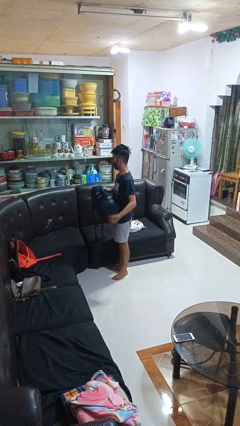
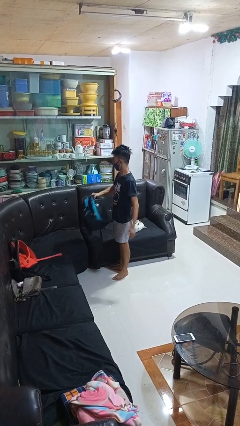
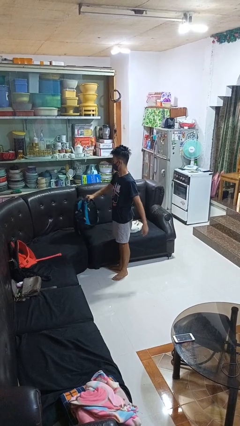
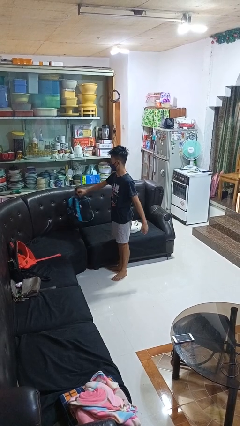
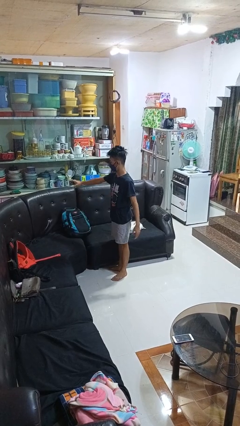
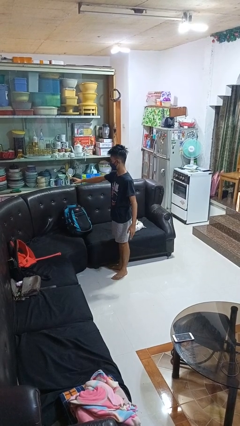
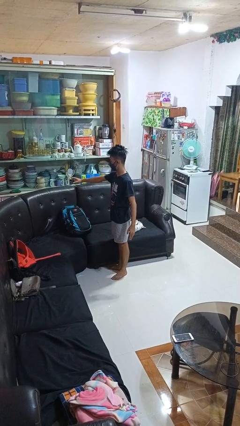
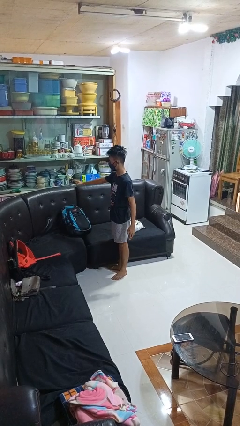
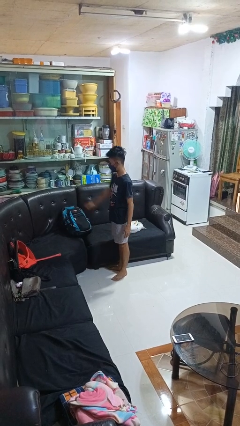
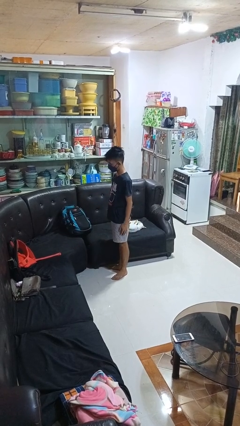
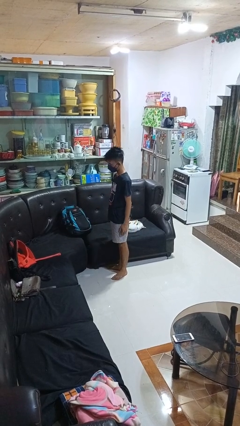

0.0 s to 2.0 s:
person puts down object on couch

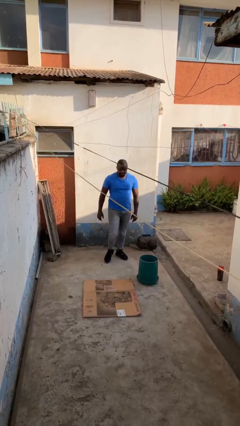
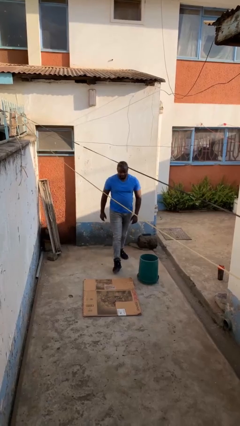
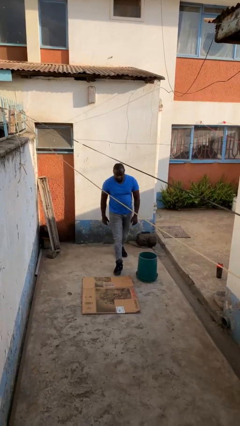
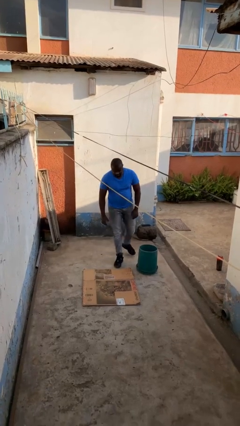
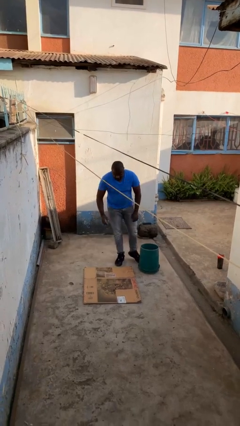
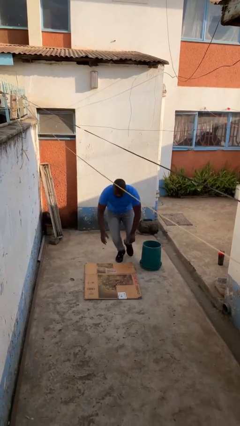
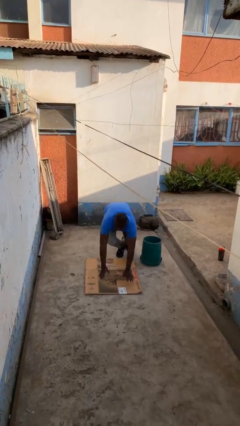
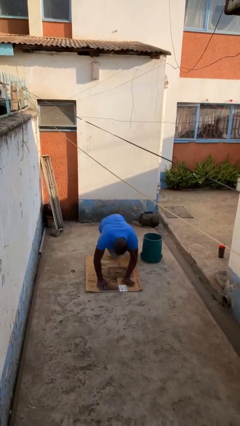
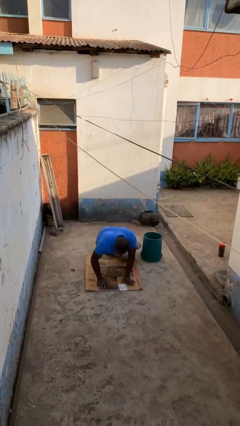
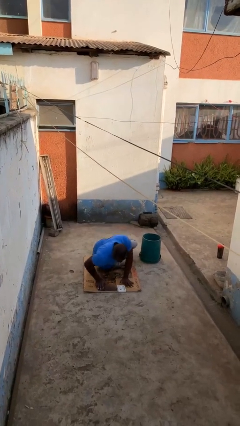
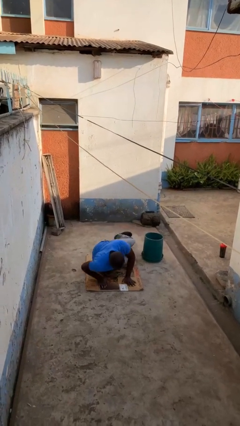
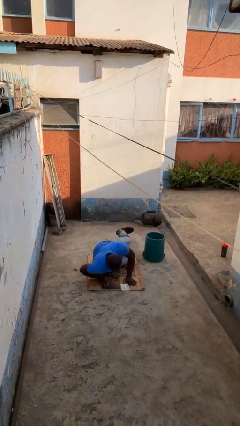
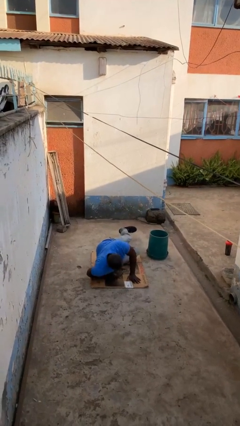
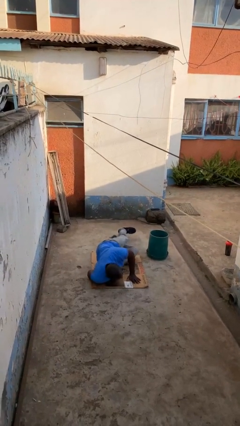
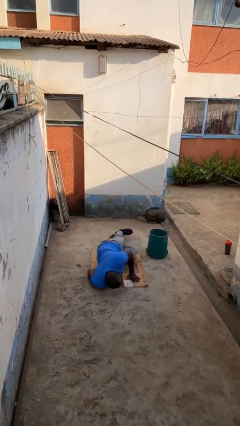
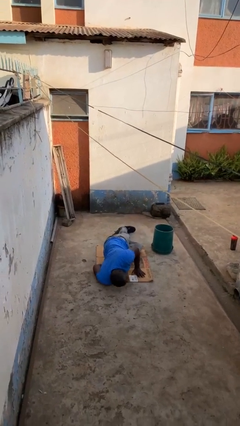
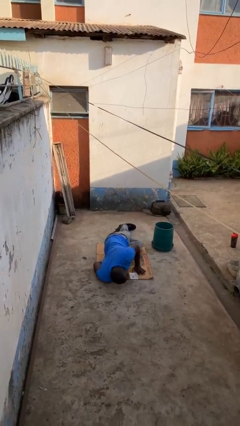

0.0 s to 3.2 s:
person trips on object on floor

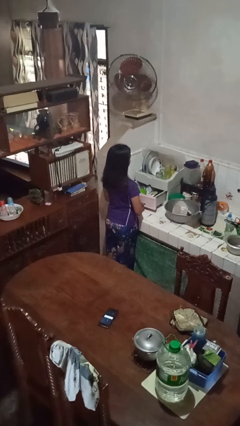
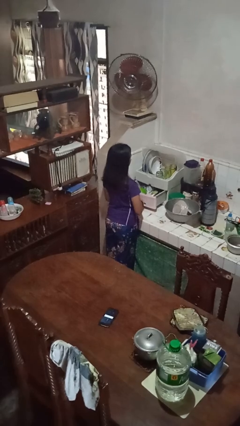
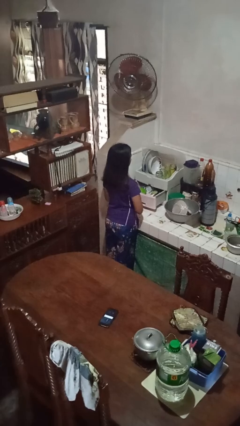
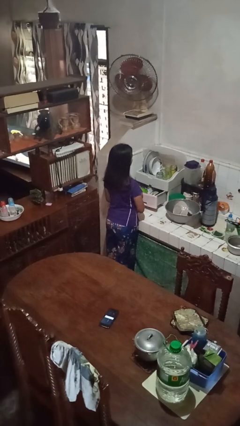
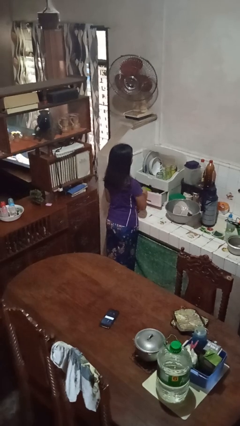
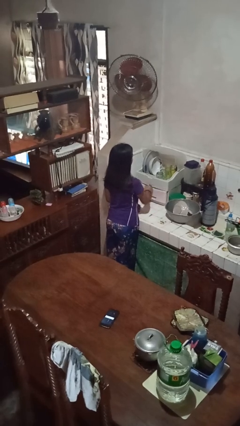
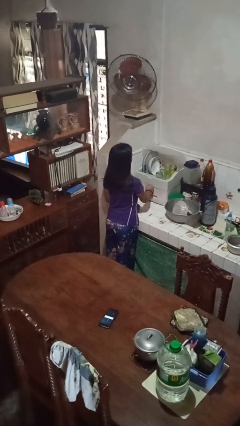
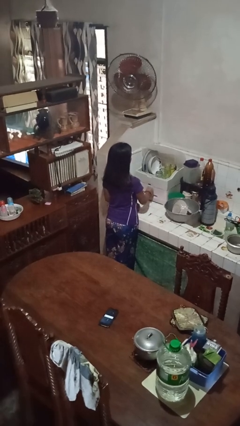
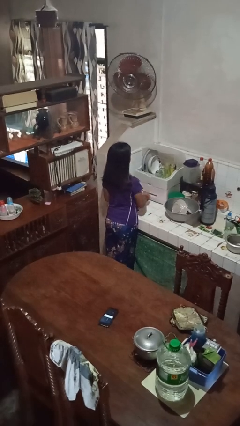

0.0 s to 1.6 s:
person closes kitchen drawer

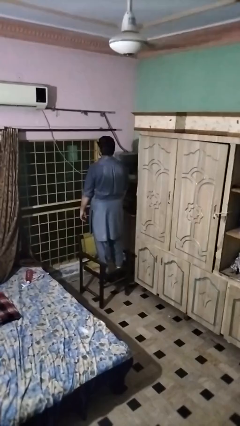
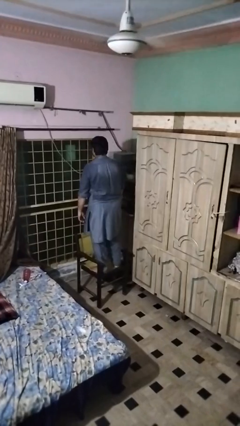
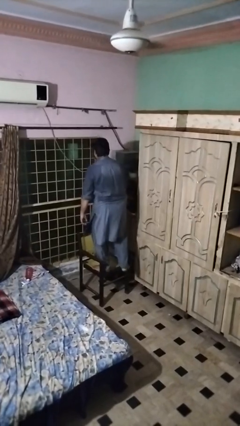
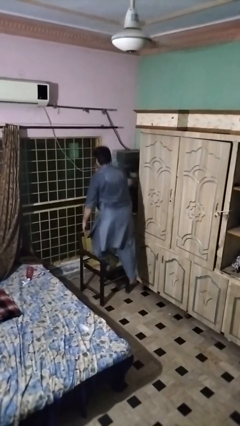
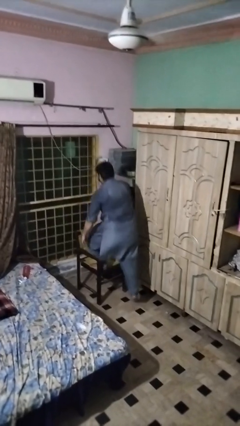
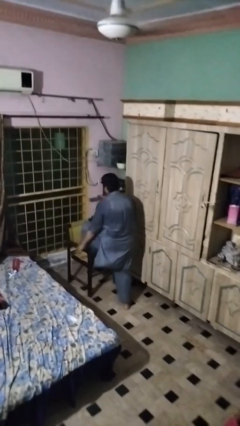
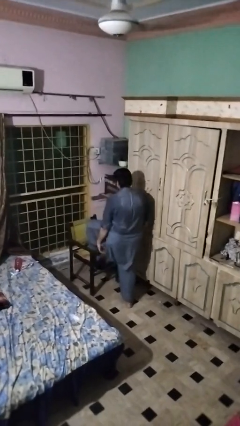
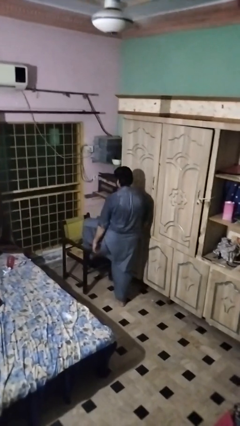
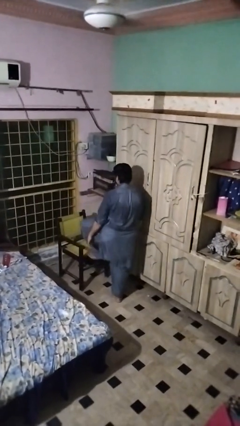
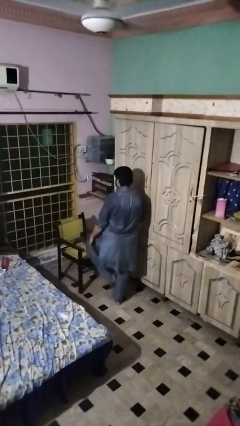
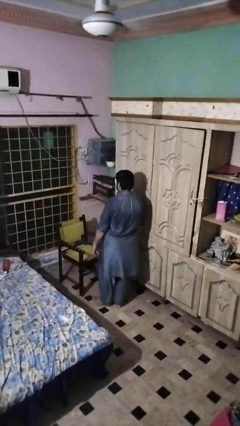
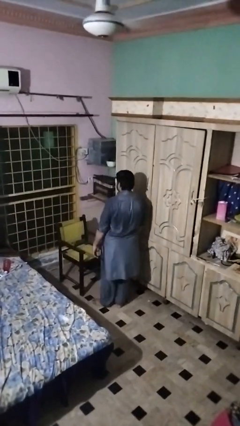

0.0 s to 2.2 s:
person climbs off chair

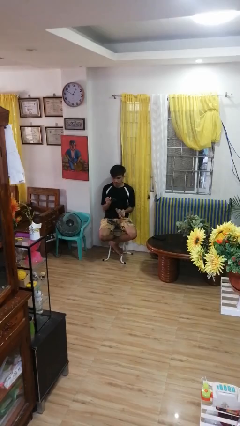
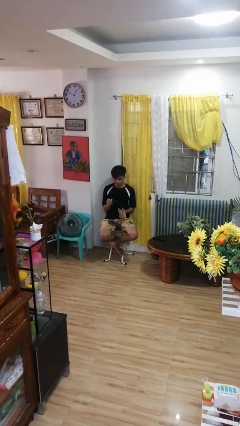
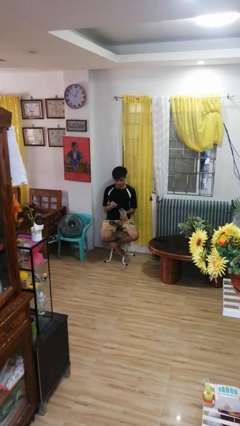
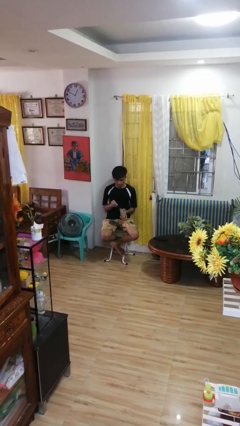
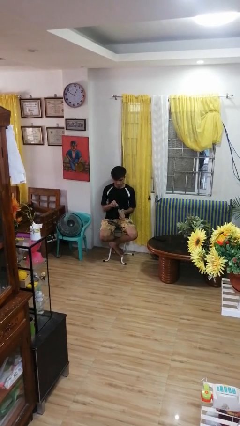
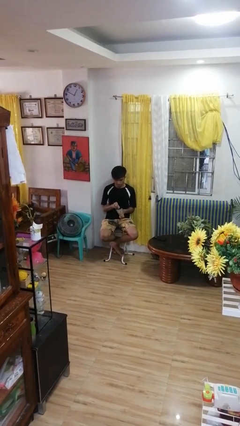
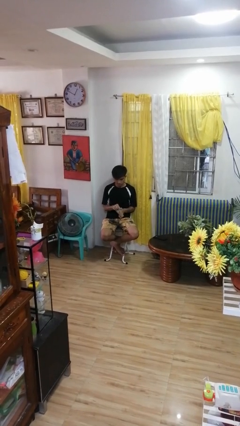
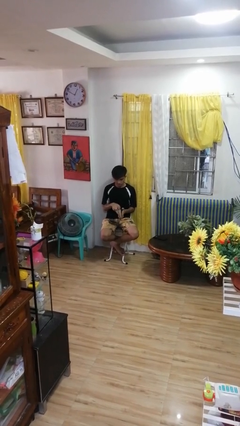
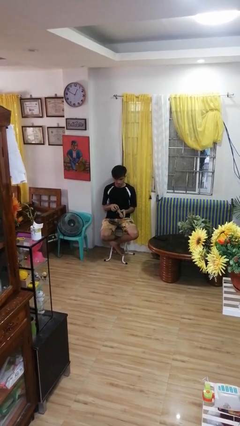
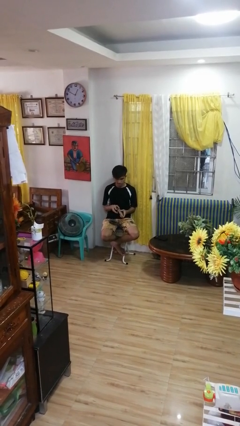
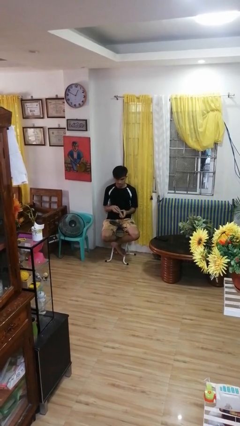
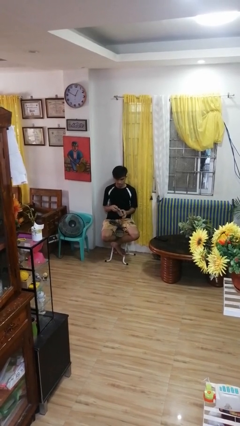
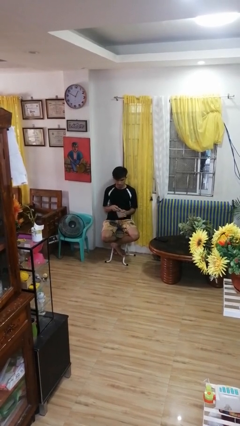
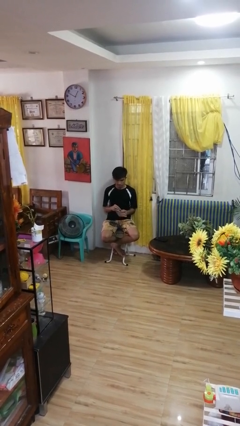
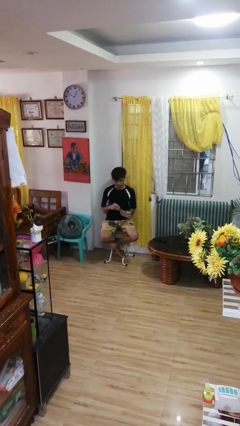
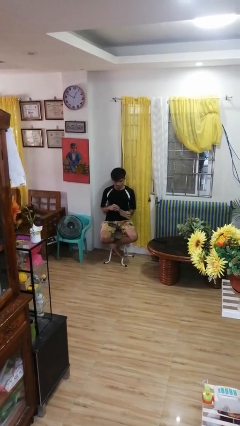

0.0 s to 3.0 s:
person puts object into purse

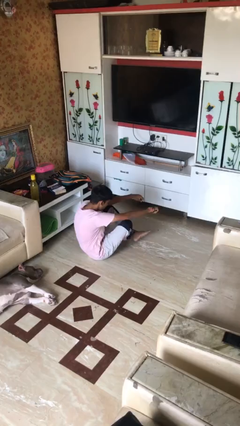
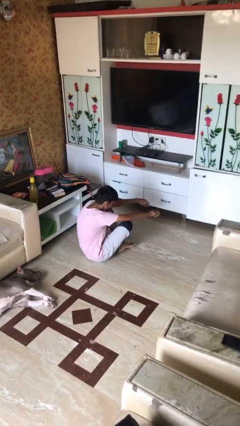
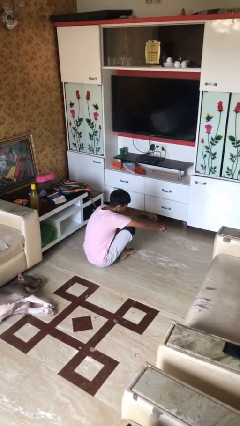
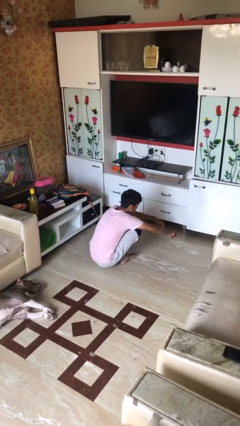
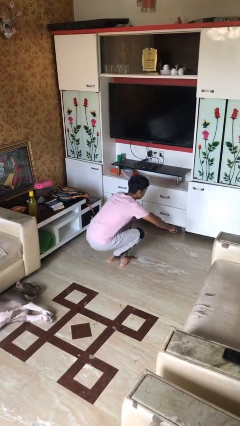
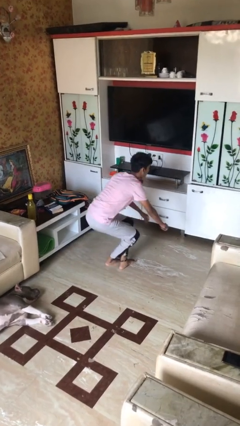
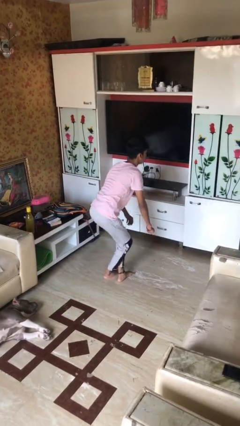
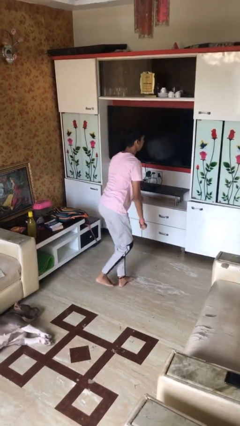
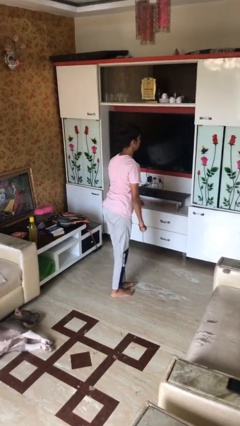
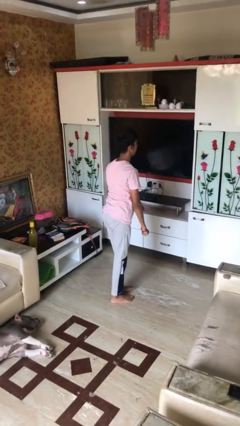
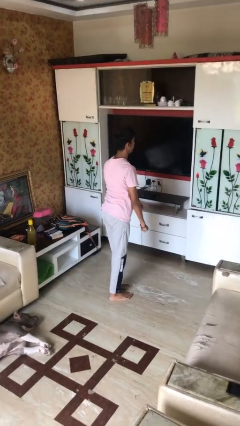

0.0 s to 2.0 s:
person stands up from floor

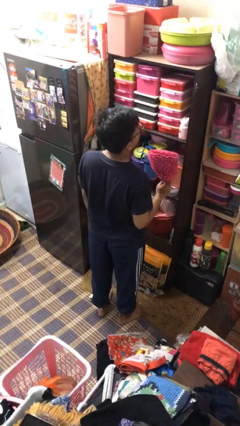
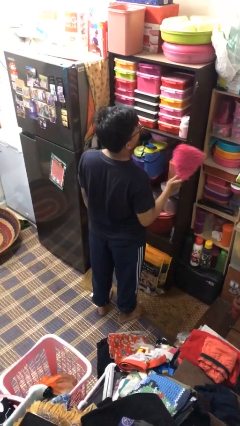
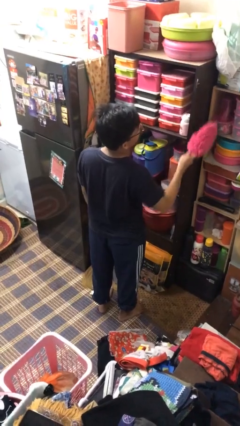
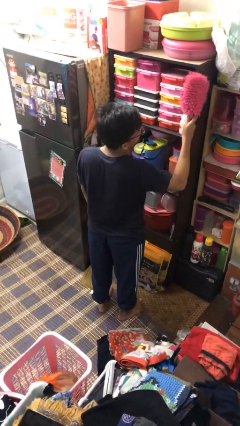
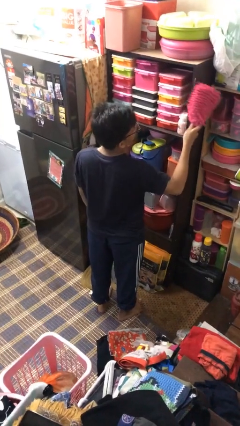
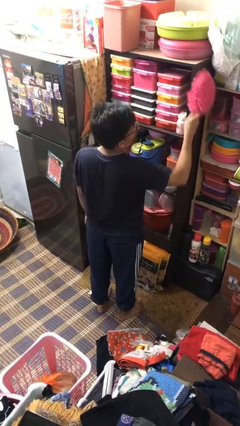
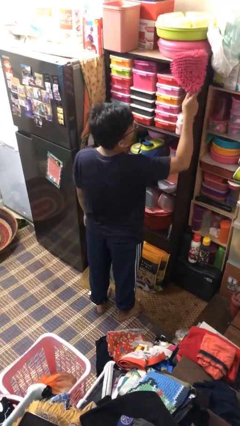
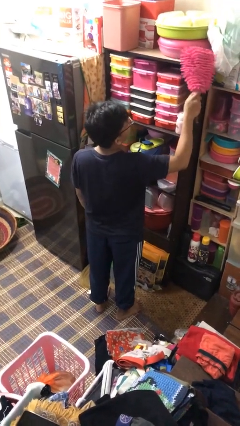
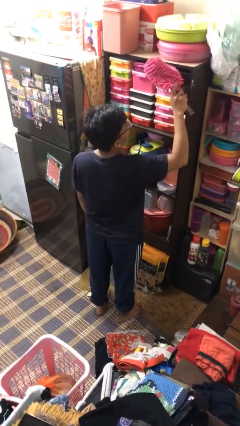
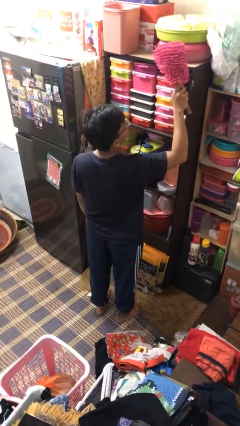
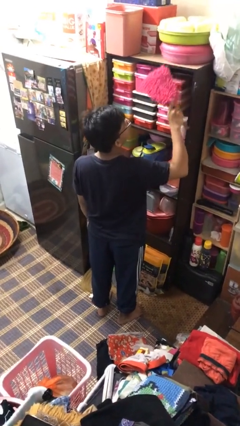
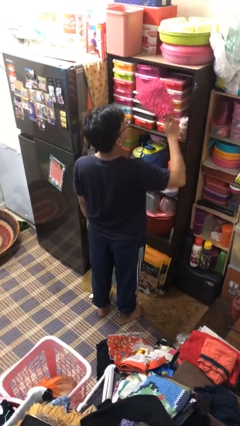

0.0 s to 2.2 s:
person dusts furniture

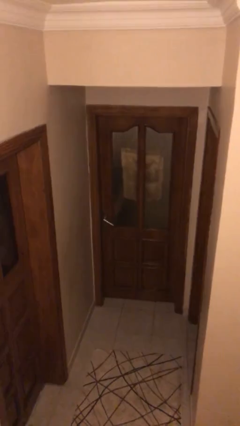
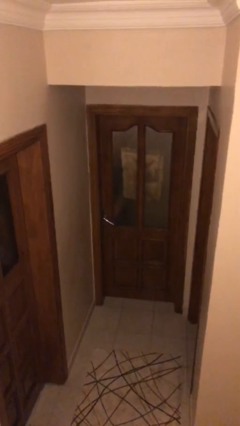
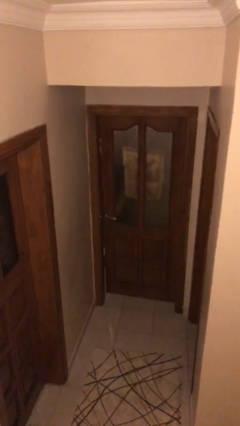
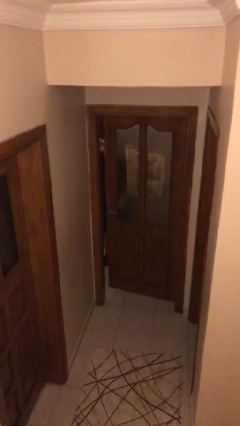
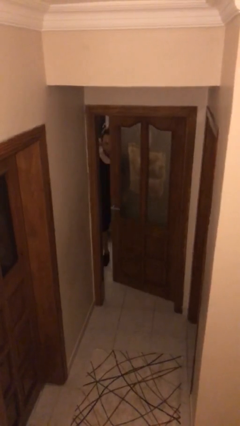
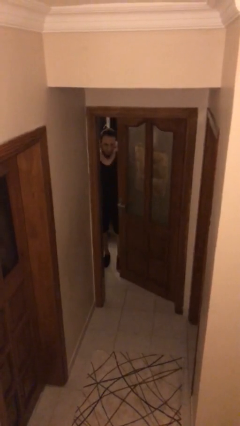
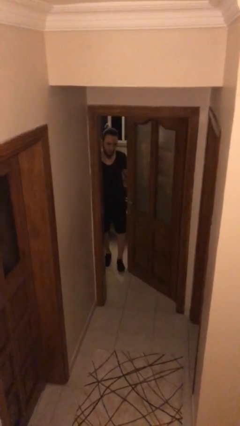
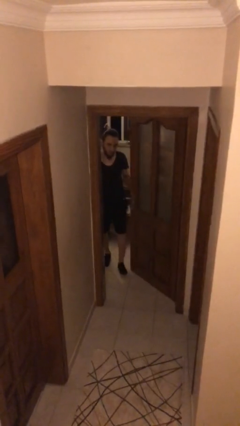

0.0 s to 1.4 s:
person opens facility door
